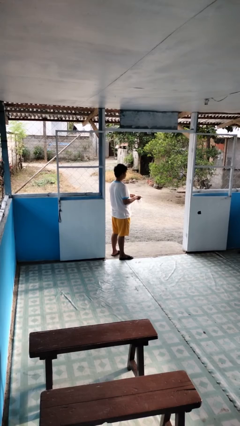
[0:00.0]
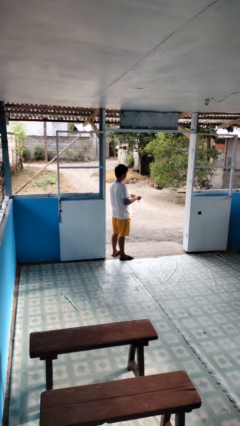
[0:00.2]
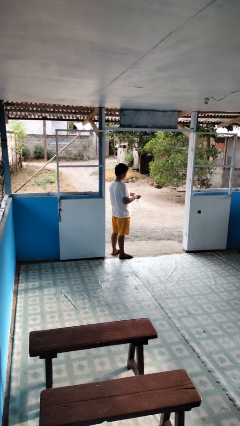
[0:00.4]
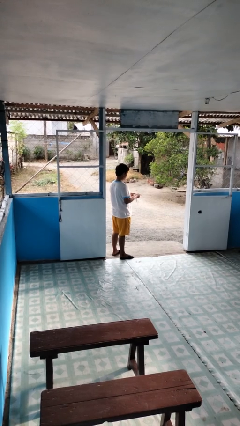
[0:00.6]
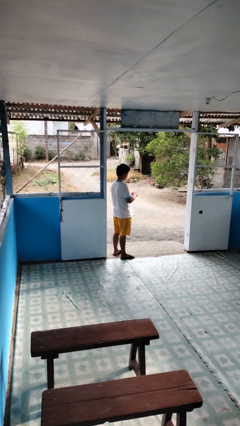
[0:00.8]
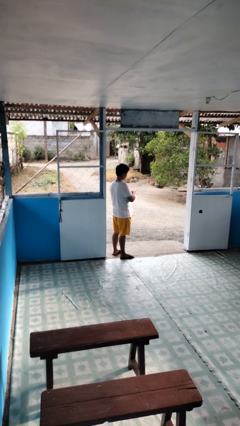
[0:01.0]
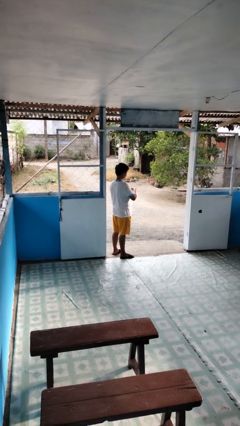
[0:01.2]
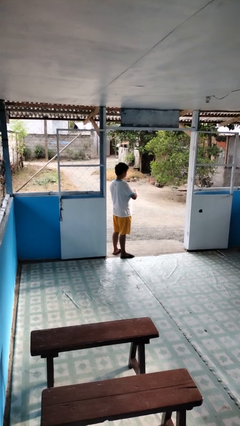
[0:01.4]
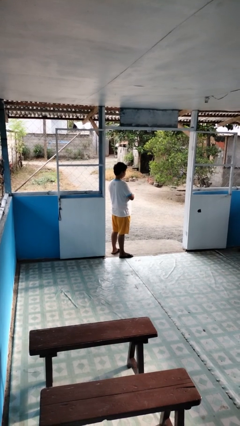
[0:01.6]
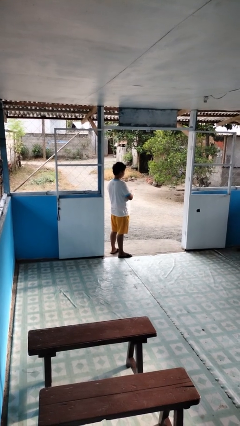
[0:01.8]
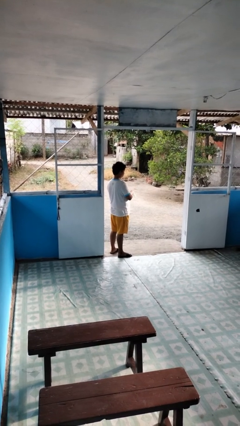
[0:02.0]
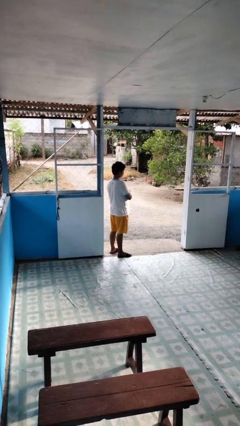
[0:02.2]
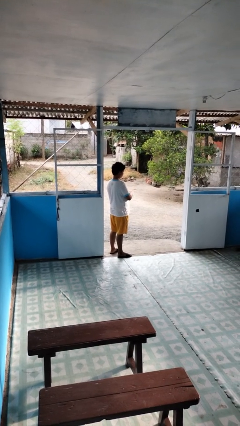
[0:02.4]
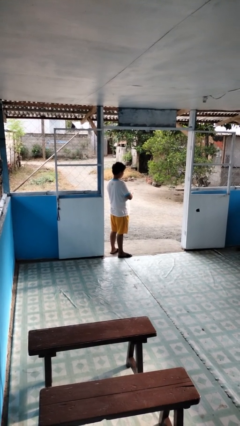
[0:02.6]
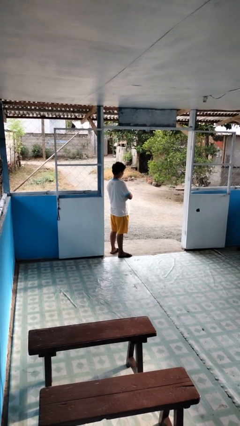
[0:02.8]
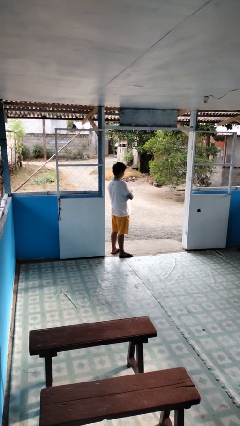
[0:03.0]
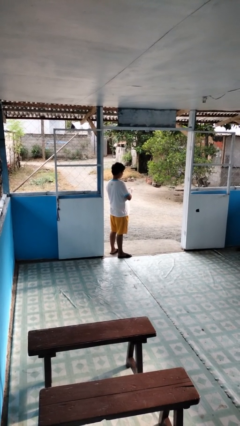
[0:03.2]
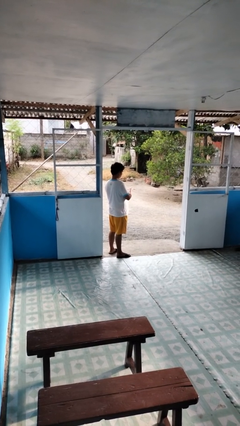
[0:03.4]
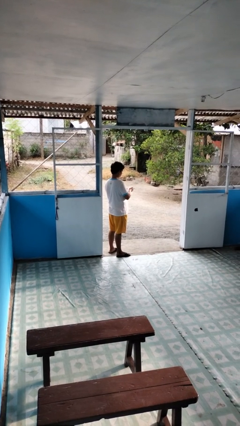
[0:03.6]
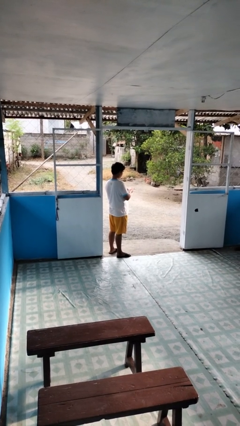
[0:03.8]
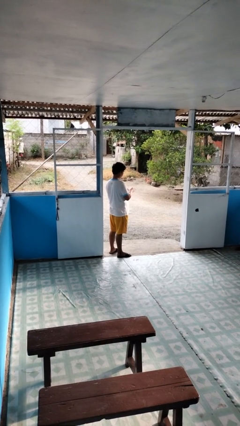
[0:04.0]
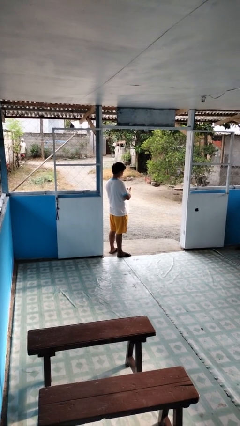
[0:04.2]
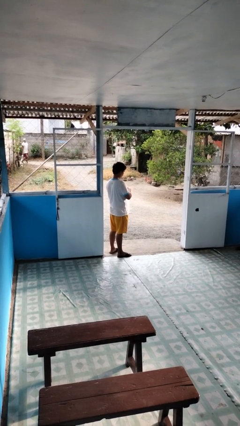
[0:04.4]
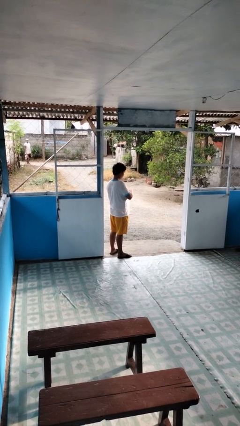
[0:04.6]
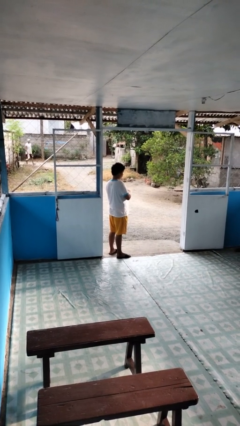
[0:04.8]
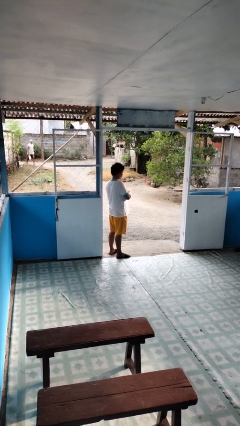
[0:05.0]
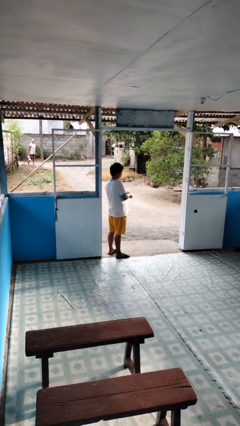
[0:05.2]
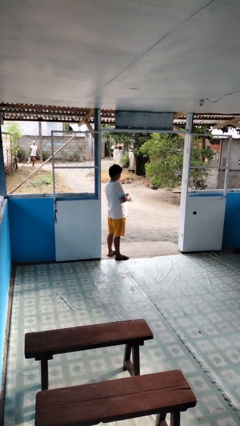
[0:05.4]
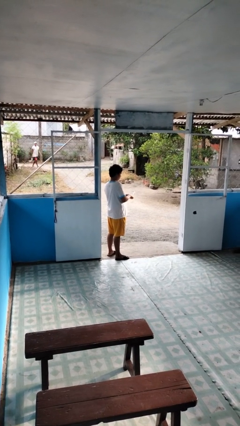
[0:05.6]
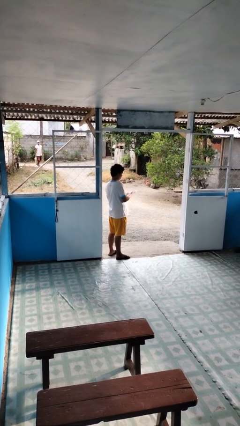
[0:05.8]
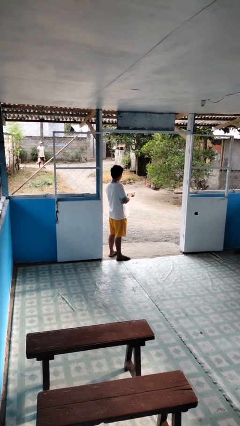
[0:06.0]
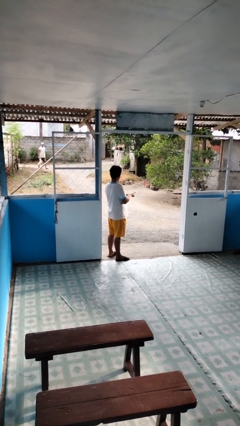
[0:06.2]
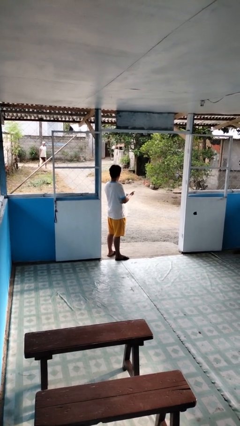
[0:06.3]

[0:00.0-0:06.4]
person puts on gloves

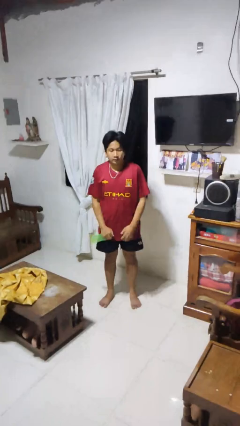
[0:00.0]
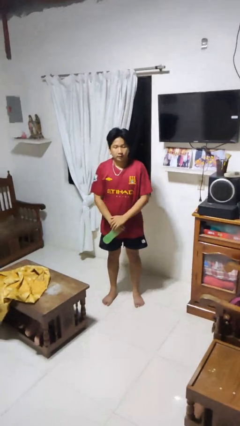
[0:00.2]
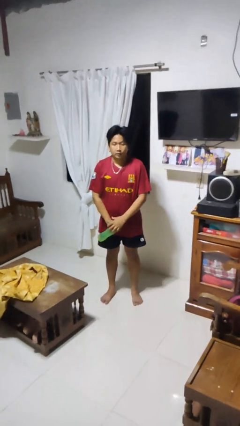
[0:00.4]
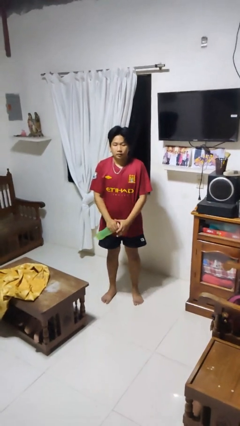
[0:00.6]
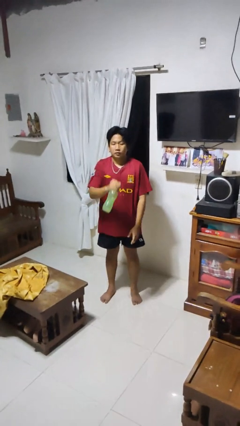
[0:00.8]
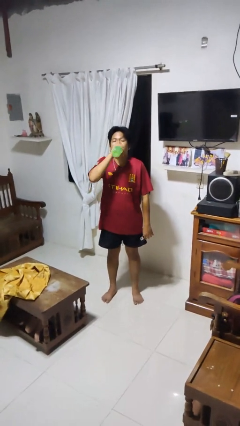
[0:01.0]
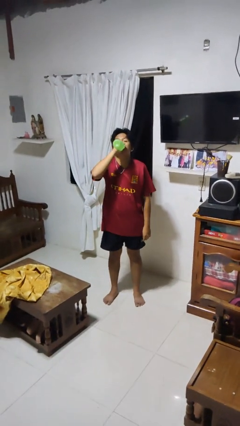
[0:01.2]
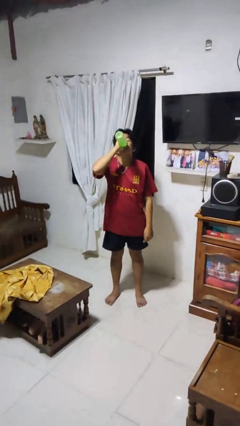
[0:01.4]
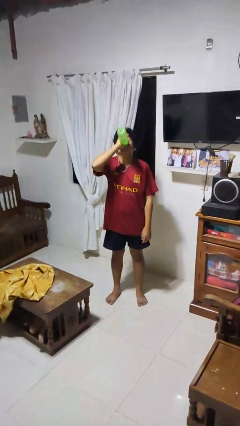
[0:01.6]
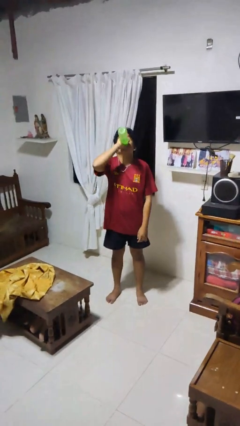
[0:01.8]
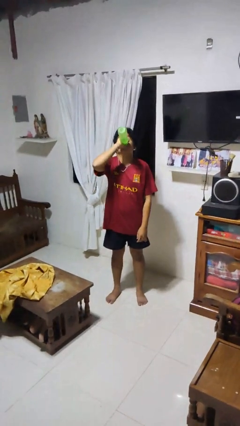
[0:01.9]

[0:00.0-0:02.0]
person drinks from bottle

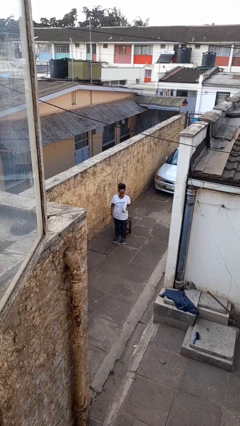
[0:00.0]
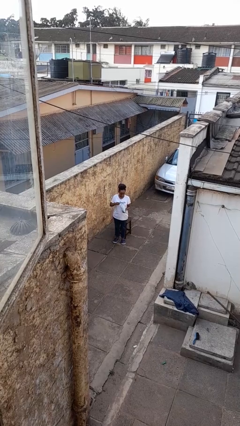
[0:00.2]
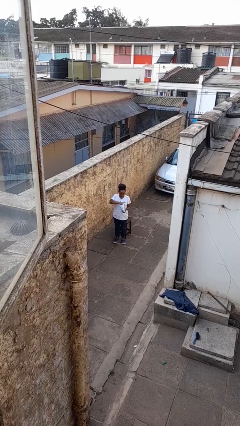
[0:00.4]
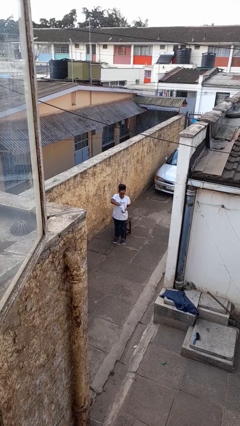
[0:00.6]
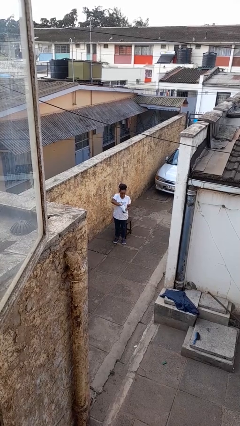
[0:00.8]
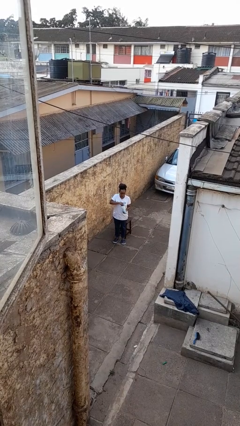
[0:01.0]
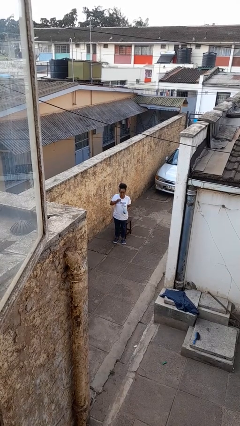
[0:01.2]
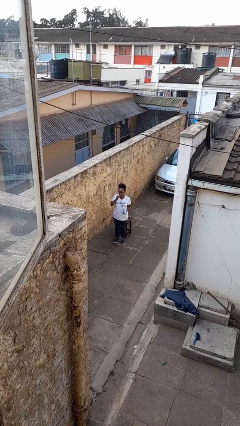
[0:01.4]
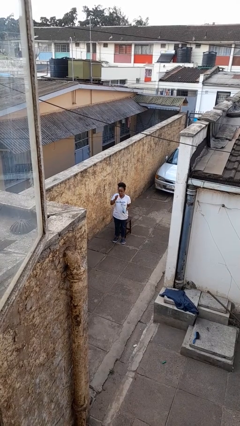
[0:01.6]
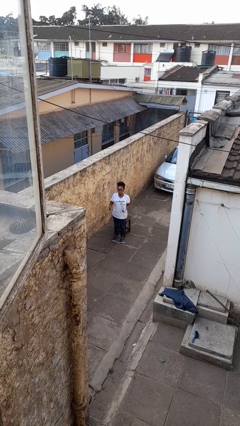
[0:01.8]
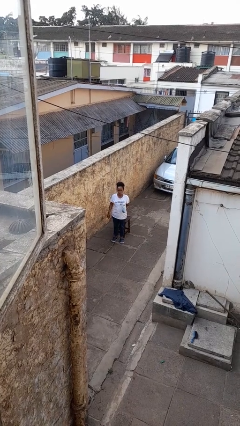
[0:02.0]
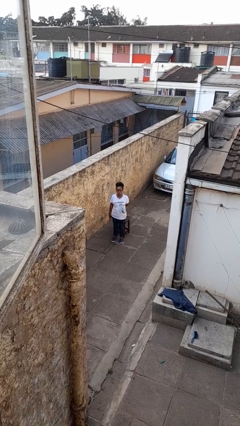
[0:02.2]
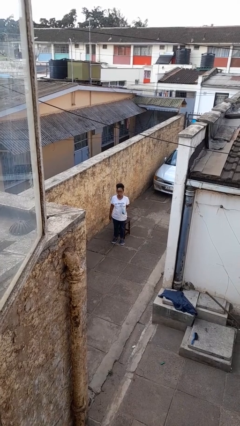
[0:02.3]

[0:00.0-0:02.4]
person eats snack from bag

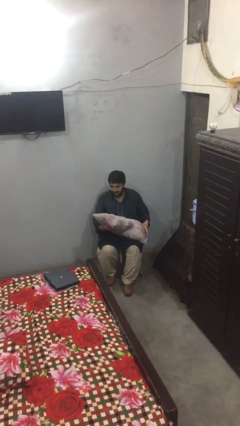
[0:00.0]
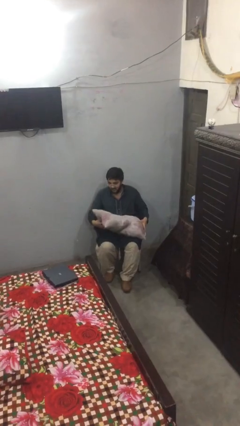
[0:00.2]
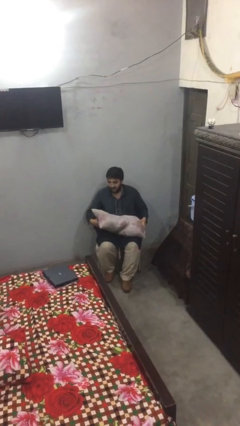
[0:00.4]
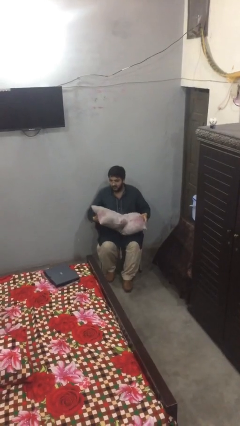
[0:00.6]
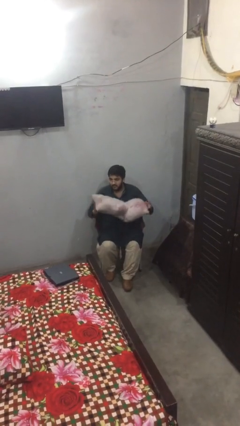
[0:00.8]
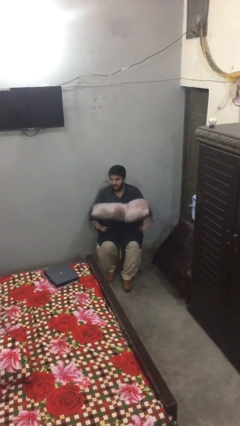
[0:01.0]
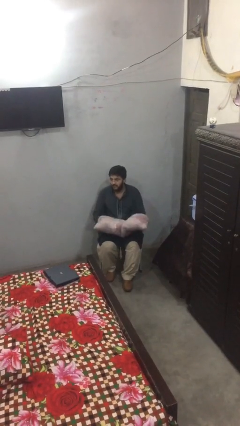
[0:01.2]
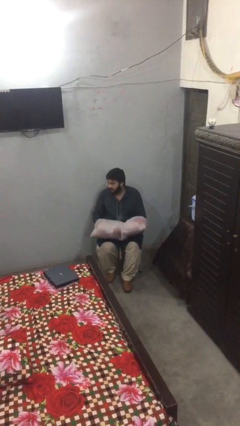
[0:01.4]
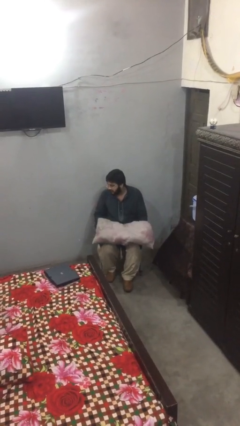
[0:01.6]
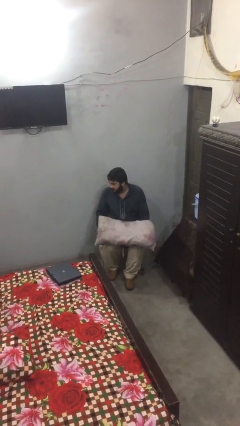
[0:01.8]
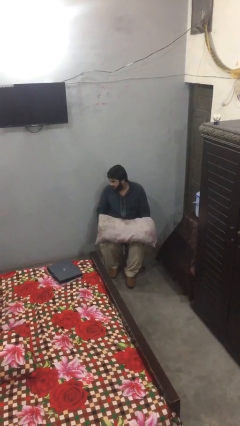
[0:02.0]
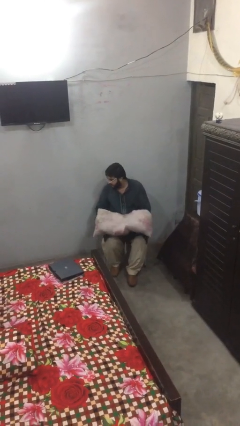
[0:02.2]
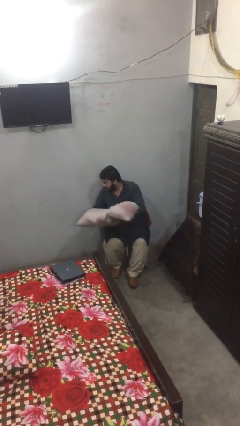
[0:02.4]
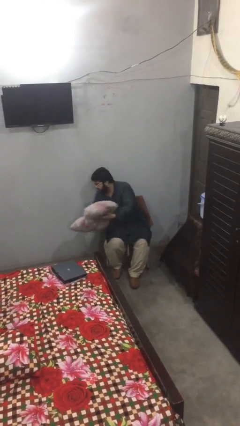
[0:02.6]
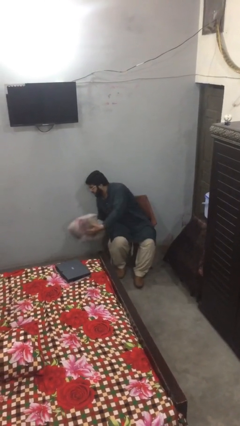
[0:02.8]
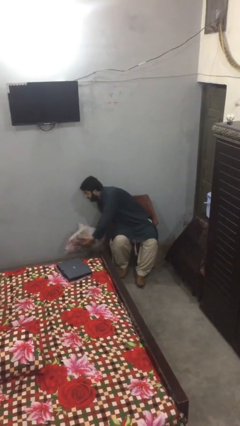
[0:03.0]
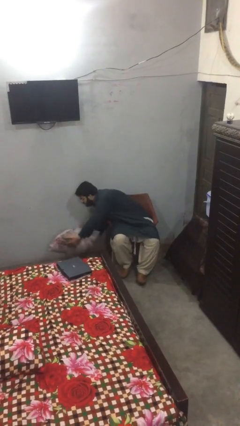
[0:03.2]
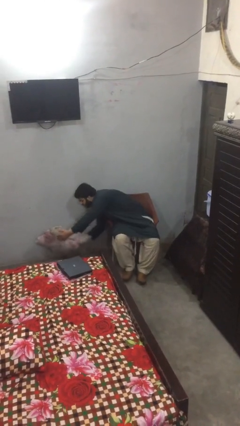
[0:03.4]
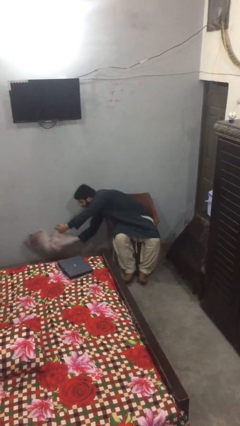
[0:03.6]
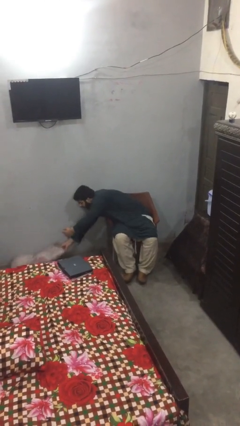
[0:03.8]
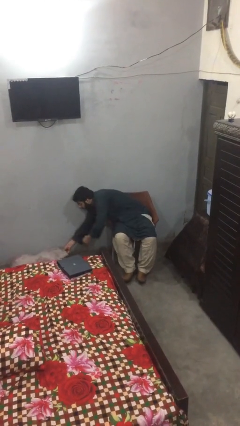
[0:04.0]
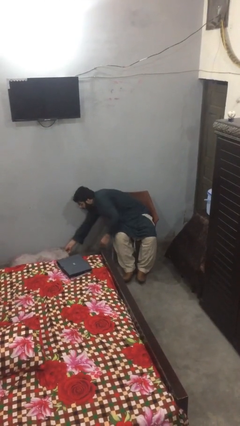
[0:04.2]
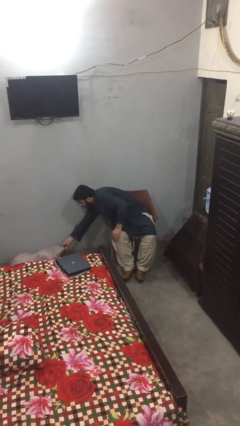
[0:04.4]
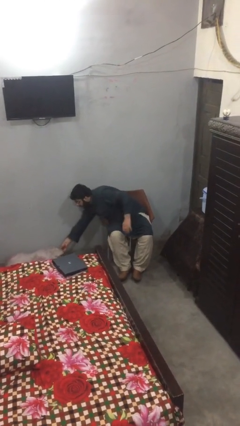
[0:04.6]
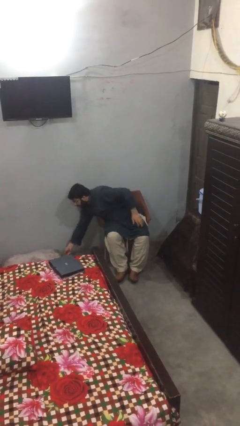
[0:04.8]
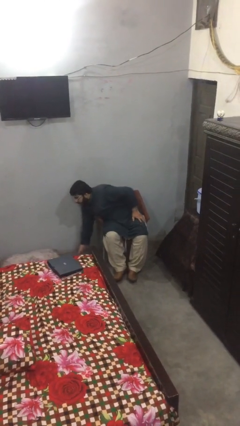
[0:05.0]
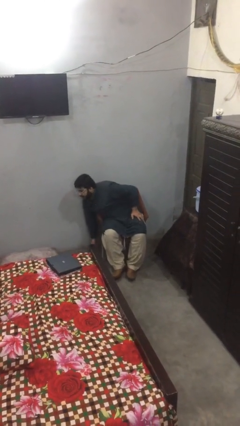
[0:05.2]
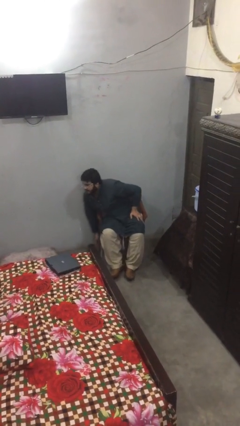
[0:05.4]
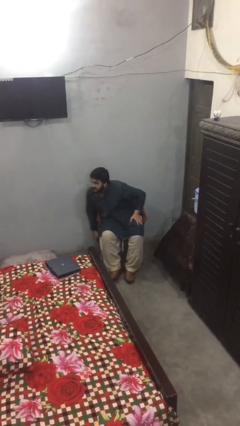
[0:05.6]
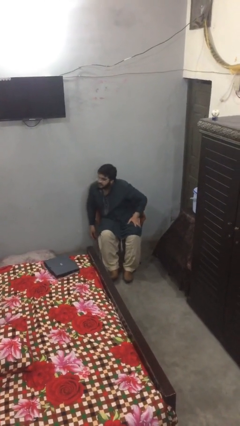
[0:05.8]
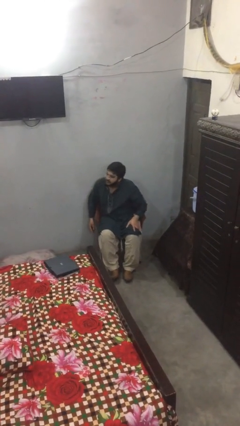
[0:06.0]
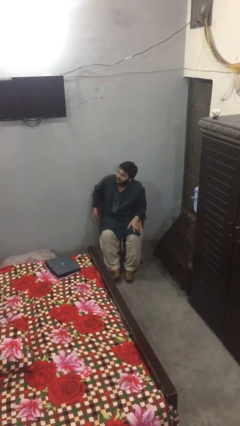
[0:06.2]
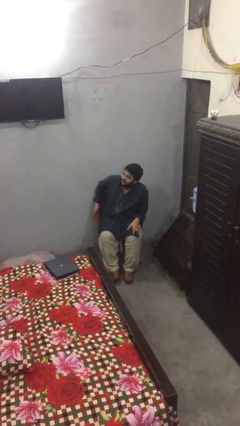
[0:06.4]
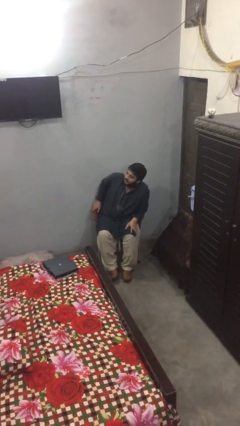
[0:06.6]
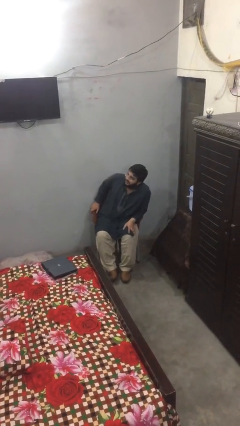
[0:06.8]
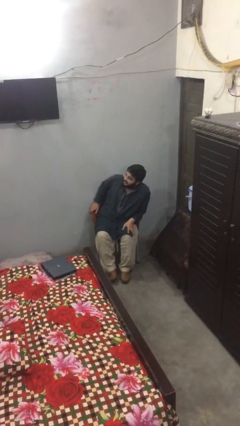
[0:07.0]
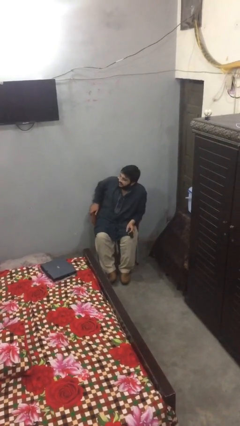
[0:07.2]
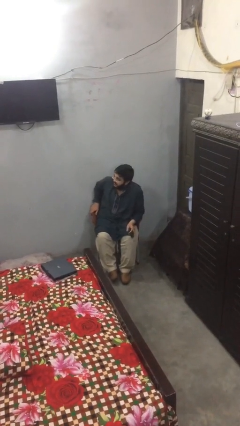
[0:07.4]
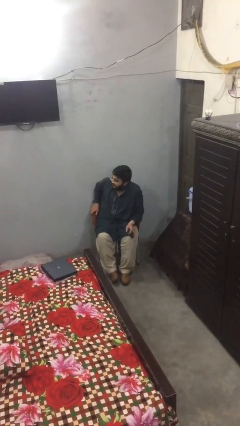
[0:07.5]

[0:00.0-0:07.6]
person puts down object on floor
